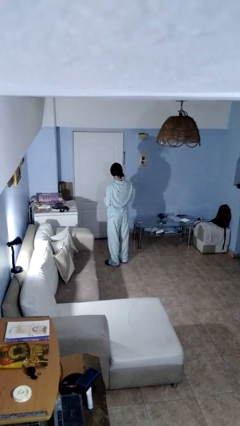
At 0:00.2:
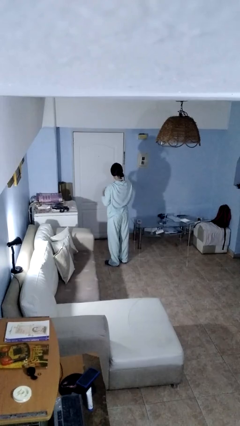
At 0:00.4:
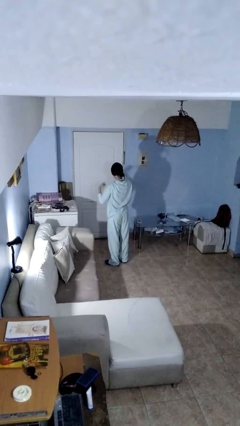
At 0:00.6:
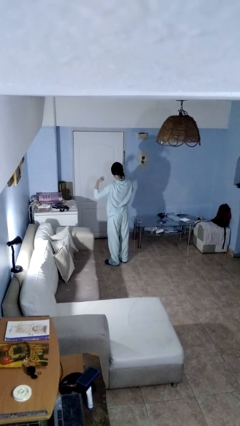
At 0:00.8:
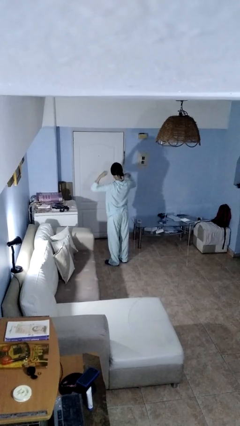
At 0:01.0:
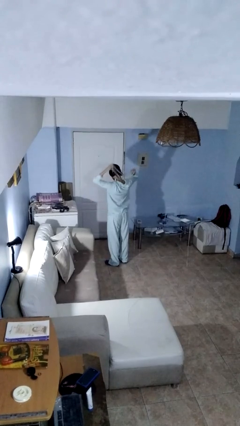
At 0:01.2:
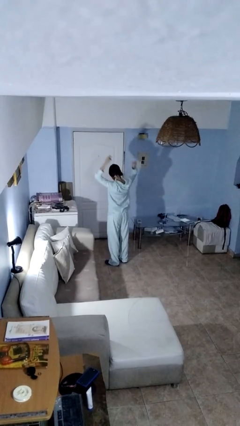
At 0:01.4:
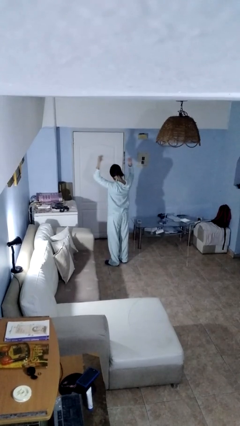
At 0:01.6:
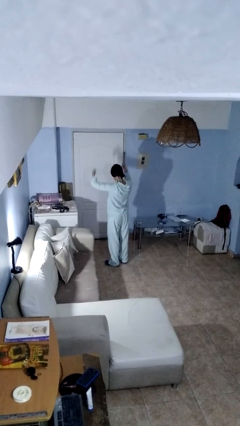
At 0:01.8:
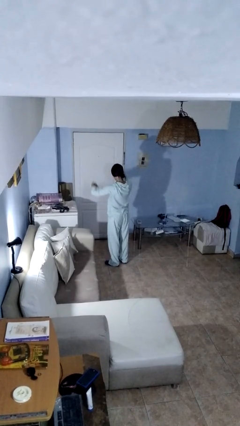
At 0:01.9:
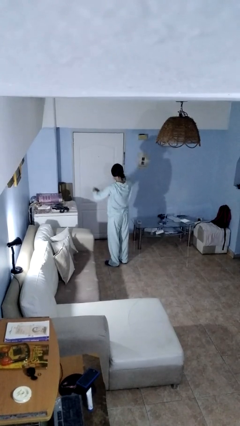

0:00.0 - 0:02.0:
person takes off necklace

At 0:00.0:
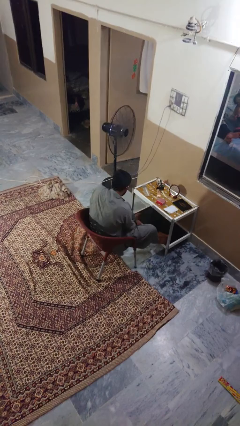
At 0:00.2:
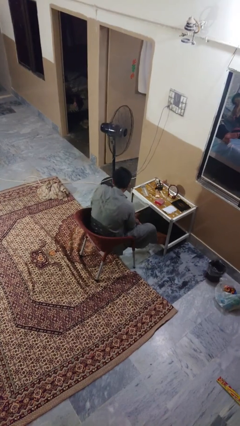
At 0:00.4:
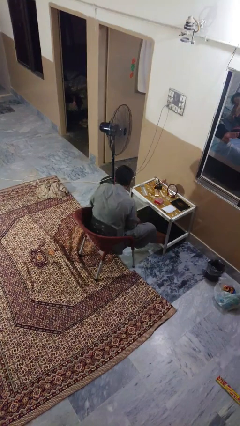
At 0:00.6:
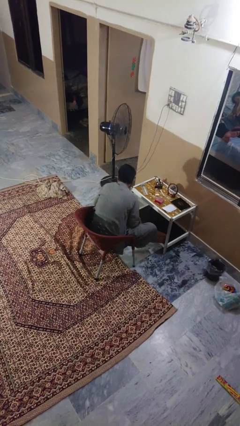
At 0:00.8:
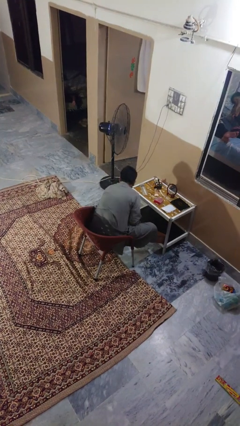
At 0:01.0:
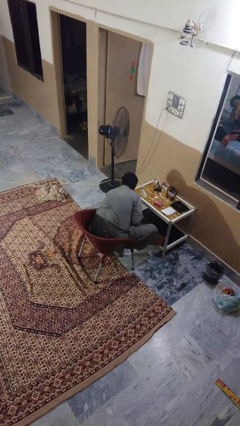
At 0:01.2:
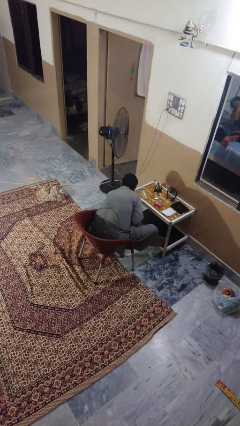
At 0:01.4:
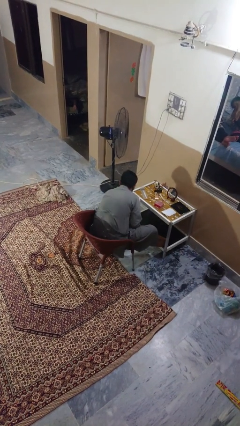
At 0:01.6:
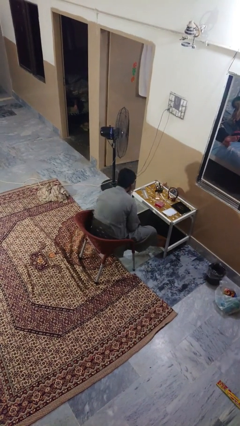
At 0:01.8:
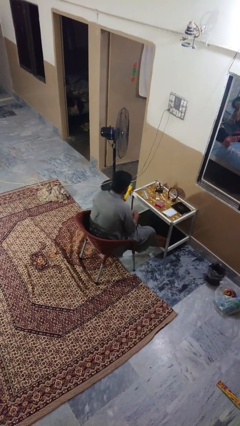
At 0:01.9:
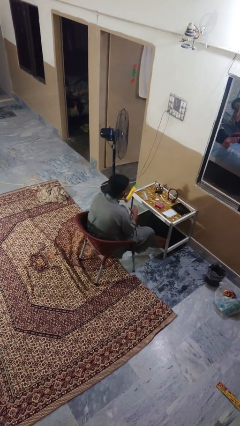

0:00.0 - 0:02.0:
person picks up object from floor

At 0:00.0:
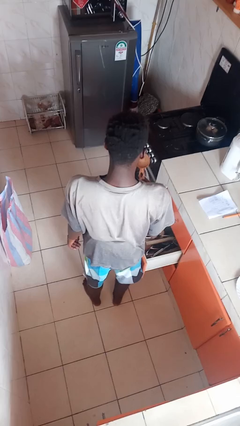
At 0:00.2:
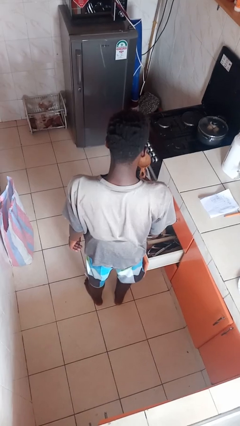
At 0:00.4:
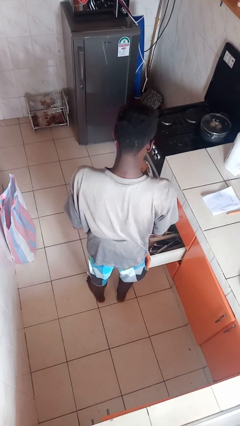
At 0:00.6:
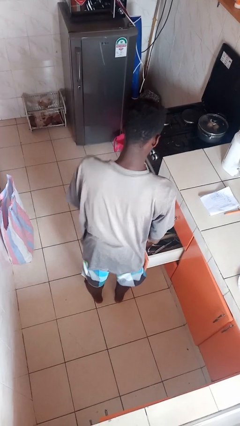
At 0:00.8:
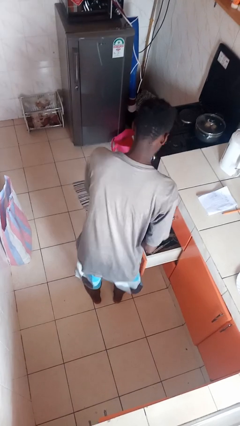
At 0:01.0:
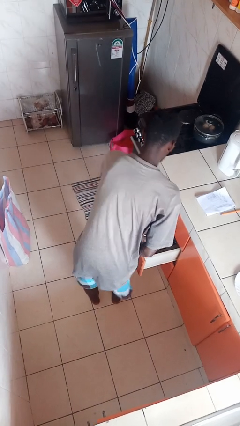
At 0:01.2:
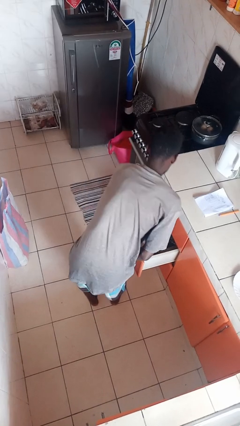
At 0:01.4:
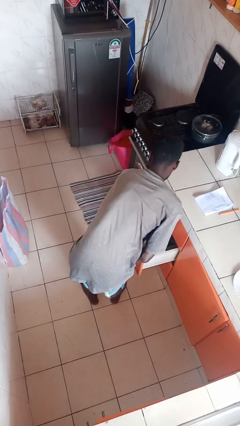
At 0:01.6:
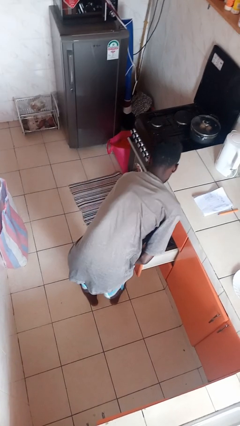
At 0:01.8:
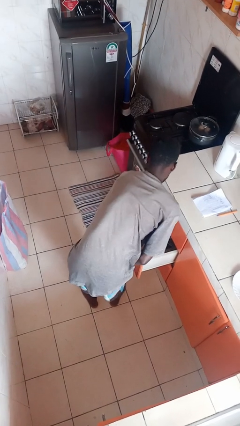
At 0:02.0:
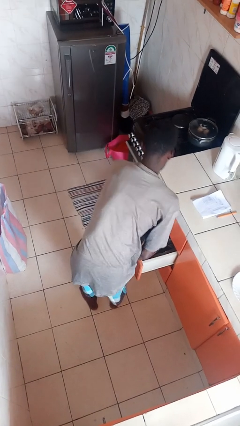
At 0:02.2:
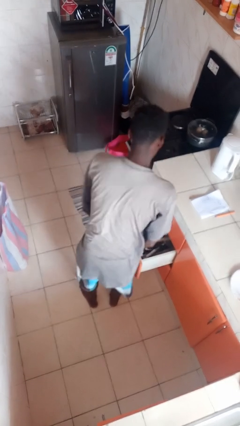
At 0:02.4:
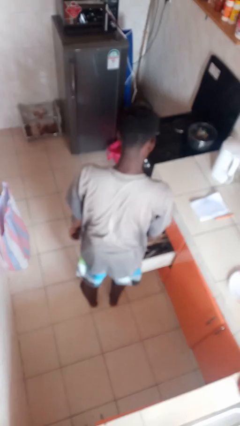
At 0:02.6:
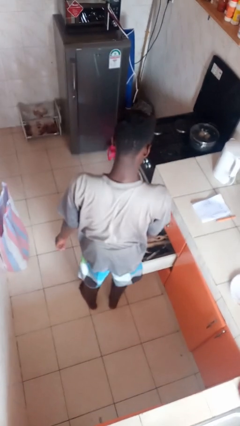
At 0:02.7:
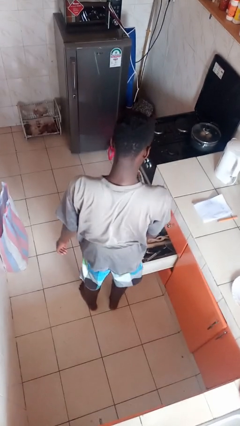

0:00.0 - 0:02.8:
person puts object into kitchen drawer

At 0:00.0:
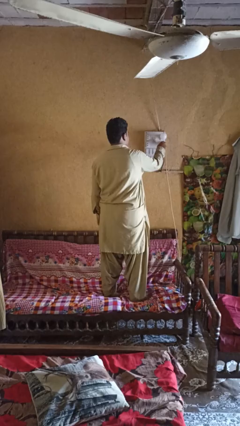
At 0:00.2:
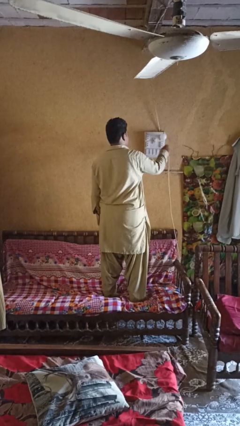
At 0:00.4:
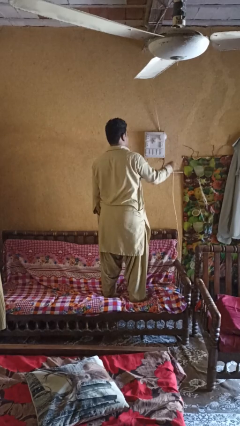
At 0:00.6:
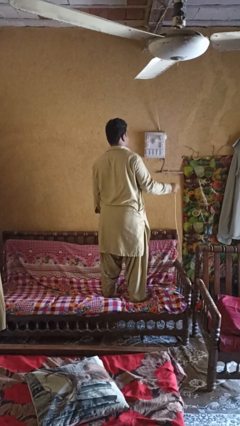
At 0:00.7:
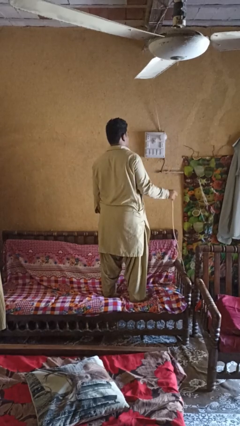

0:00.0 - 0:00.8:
person unplugs from electrical socket

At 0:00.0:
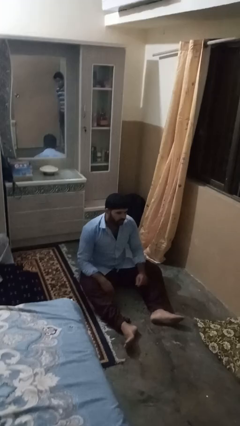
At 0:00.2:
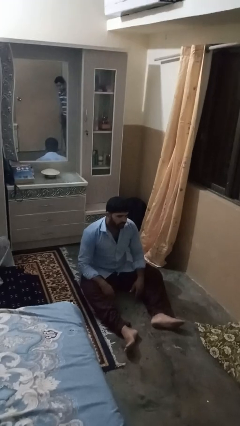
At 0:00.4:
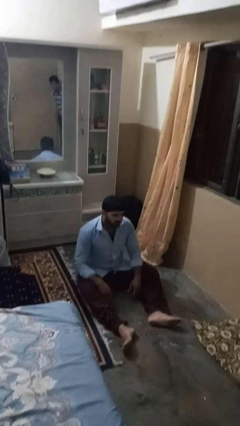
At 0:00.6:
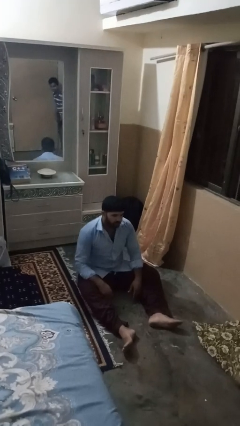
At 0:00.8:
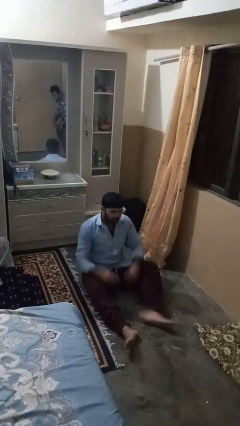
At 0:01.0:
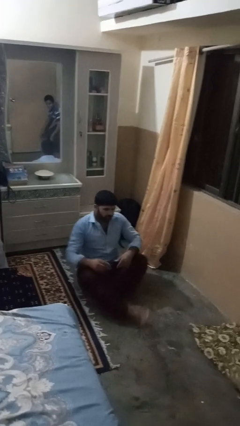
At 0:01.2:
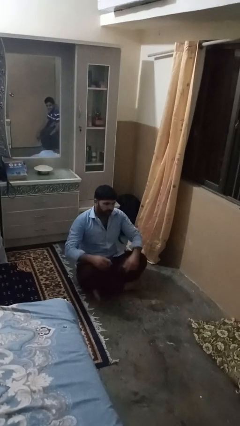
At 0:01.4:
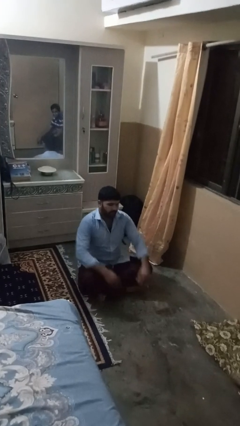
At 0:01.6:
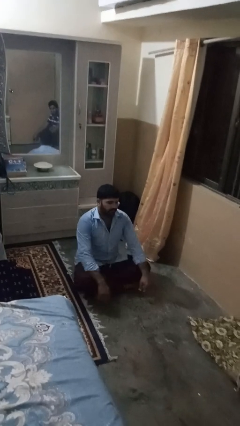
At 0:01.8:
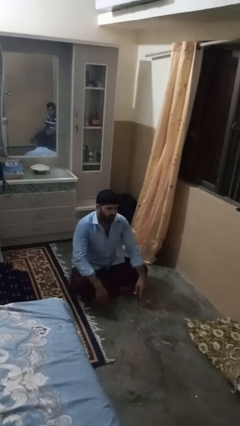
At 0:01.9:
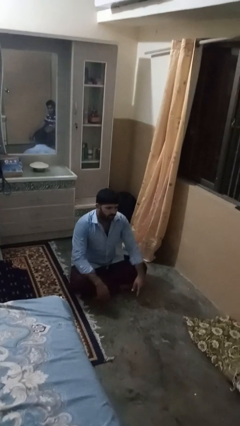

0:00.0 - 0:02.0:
person crosses legs

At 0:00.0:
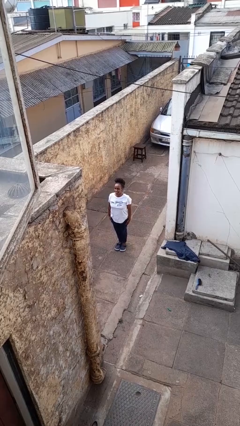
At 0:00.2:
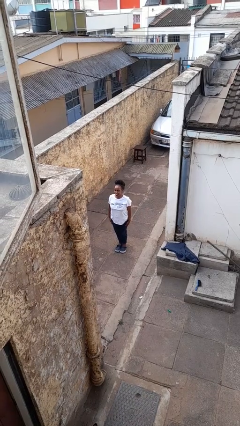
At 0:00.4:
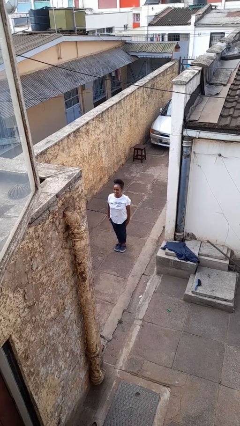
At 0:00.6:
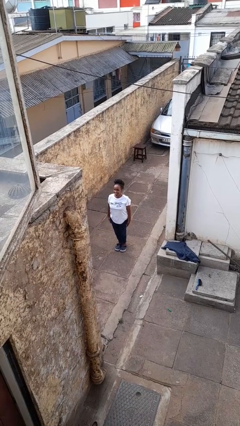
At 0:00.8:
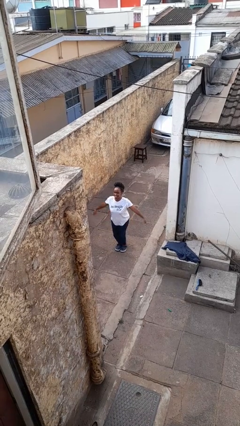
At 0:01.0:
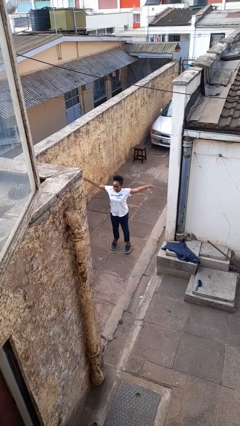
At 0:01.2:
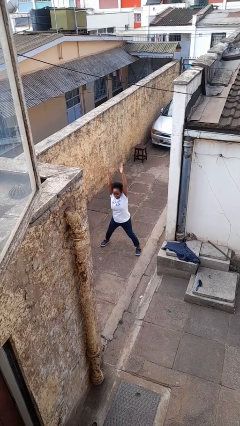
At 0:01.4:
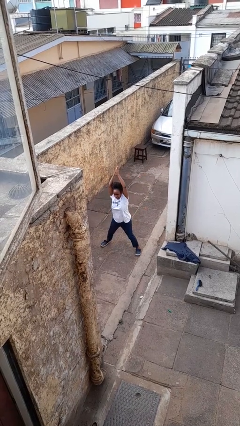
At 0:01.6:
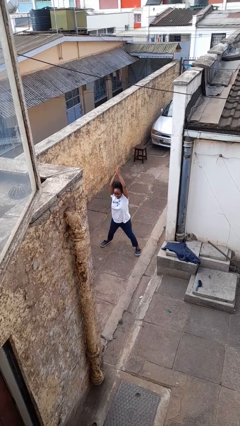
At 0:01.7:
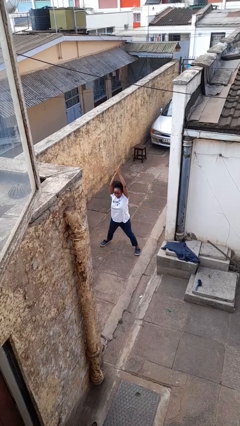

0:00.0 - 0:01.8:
person exercises with jumping jacks

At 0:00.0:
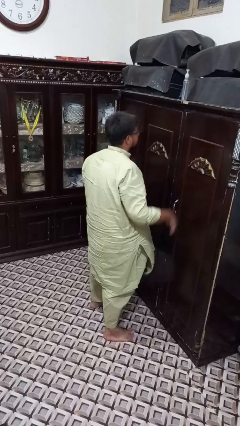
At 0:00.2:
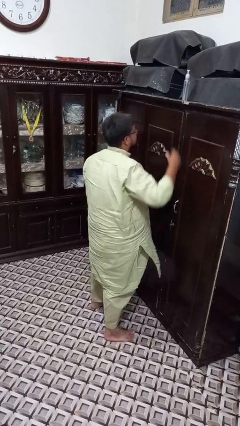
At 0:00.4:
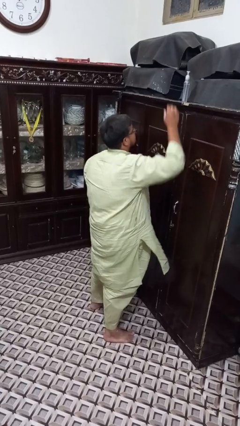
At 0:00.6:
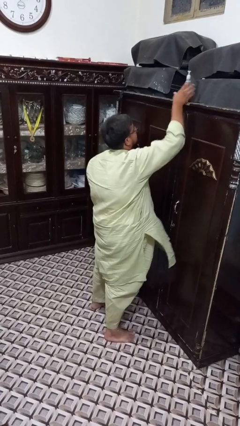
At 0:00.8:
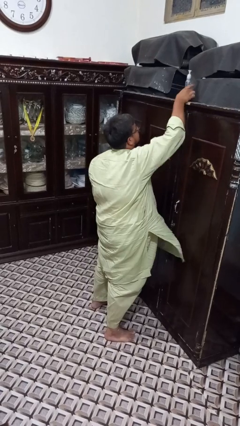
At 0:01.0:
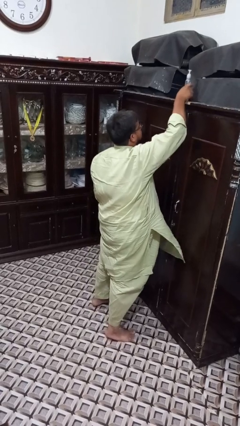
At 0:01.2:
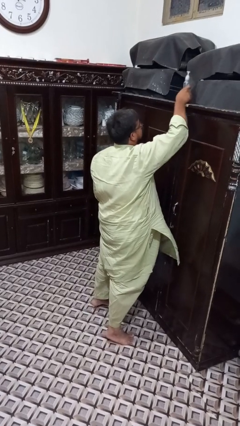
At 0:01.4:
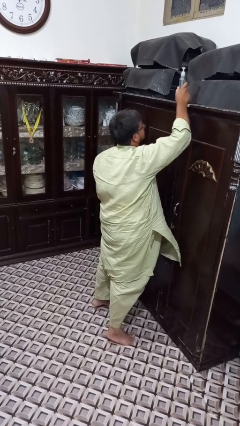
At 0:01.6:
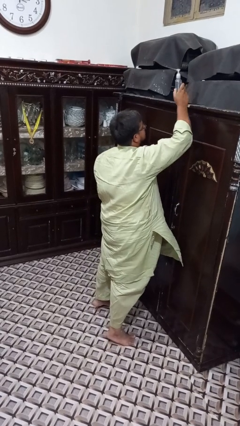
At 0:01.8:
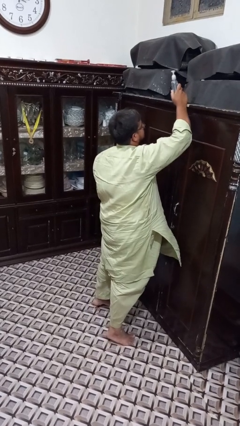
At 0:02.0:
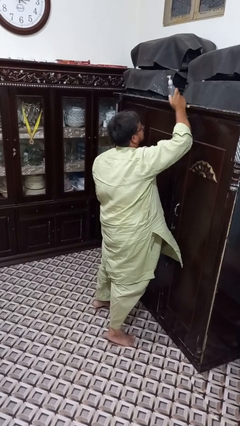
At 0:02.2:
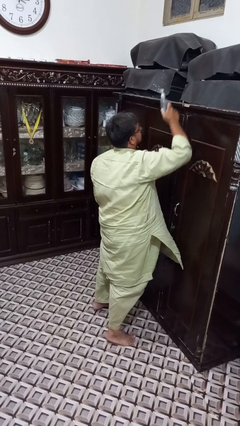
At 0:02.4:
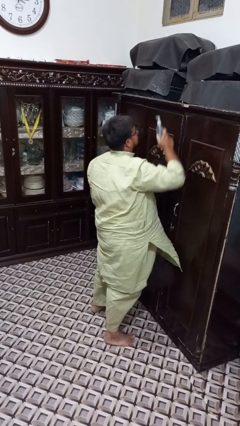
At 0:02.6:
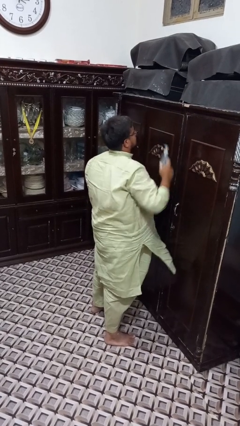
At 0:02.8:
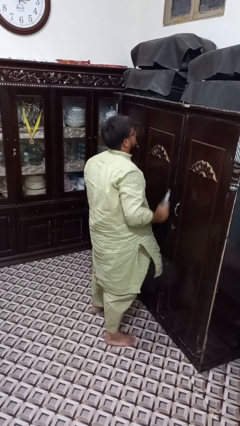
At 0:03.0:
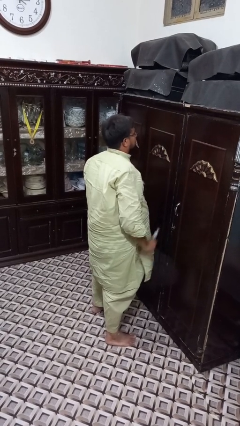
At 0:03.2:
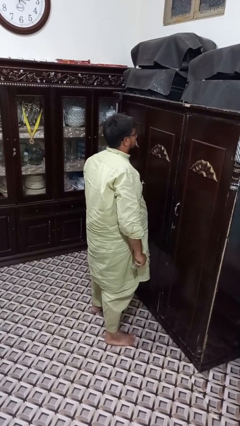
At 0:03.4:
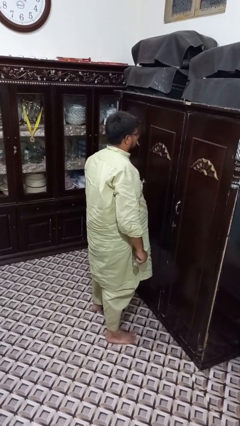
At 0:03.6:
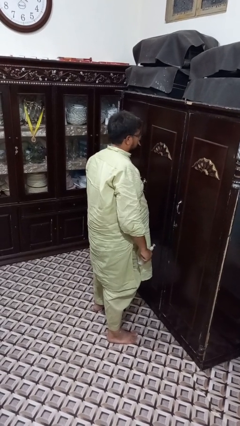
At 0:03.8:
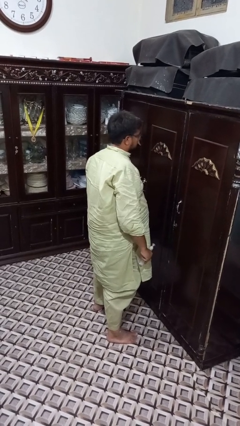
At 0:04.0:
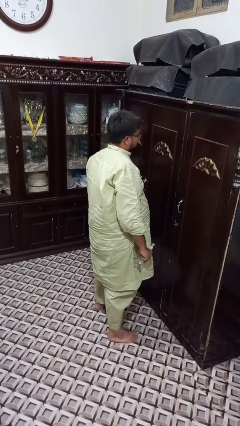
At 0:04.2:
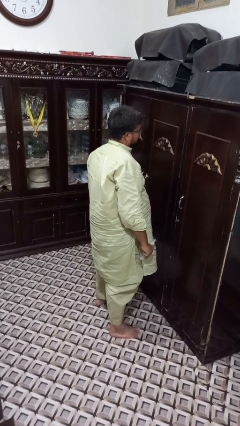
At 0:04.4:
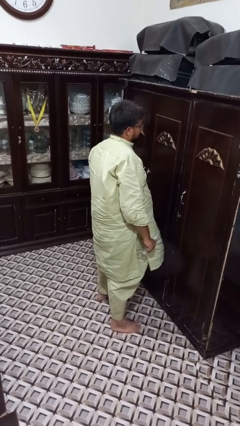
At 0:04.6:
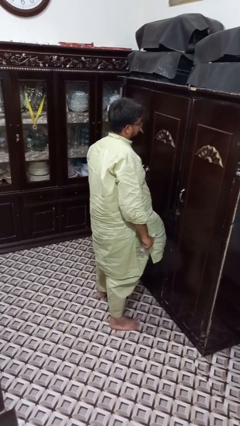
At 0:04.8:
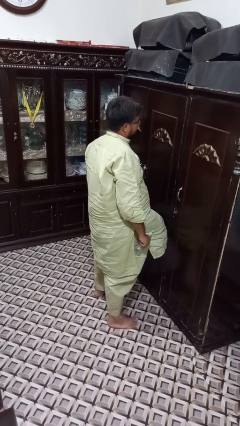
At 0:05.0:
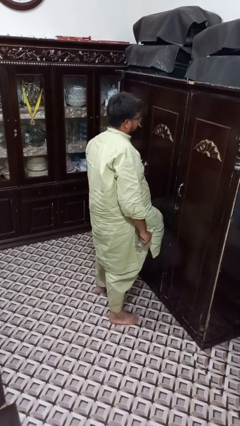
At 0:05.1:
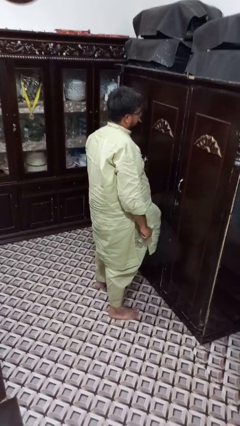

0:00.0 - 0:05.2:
person picks up object from shelf

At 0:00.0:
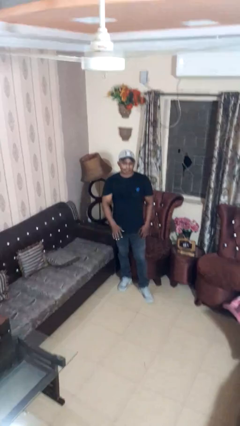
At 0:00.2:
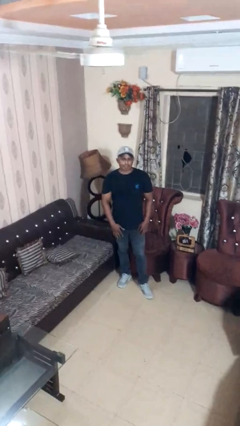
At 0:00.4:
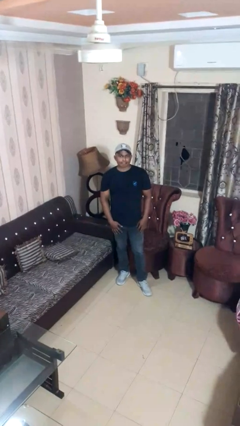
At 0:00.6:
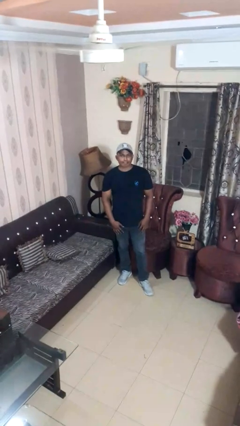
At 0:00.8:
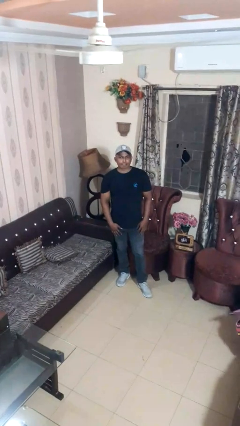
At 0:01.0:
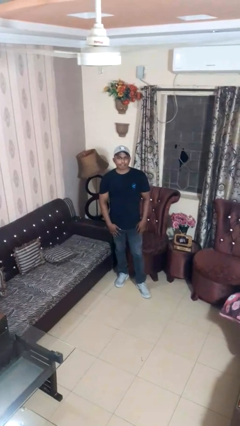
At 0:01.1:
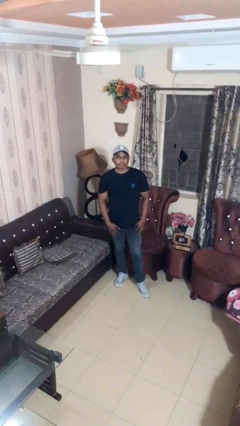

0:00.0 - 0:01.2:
person gestures swipe down
